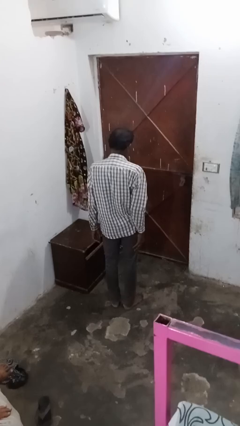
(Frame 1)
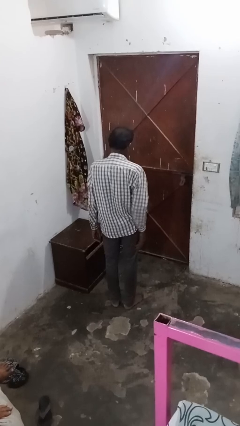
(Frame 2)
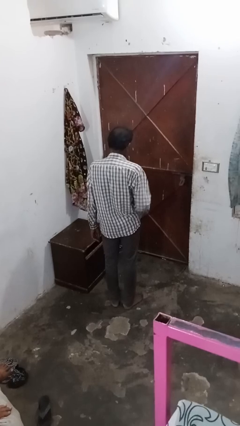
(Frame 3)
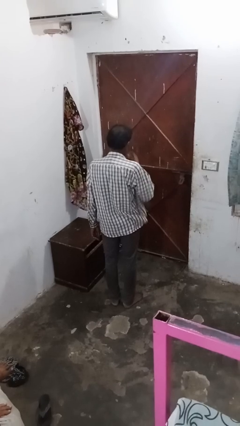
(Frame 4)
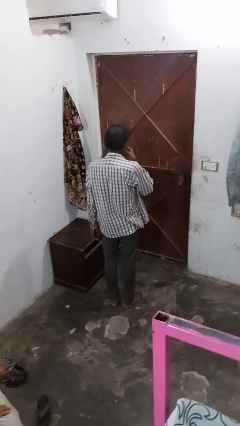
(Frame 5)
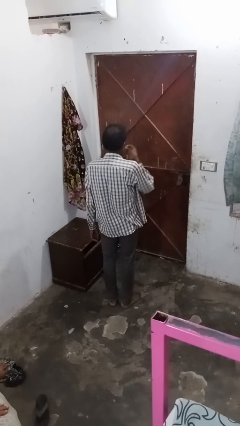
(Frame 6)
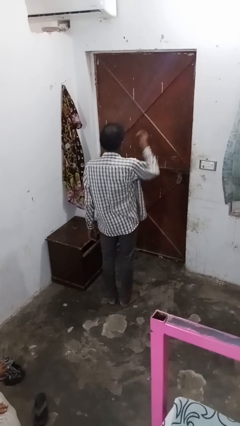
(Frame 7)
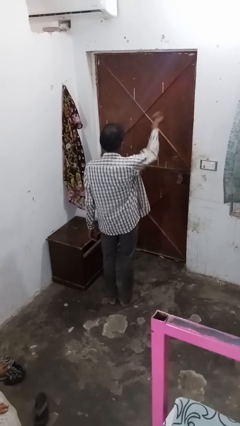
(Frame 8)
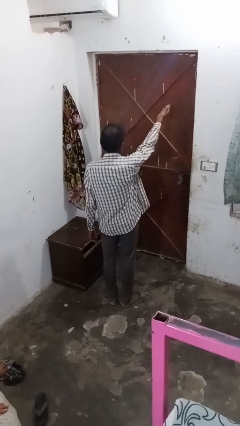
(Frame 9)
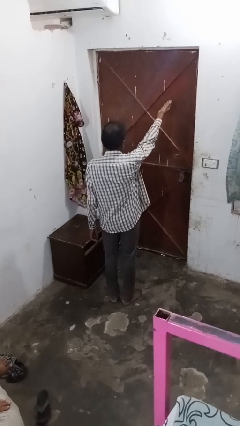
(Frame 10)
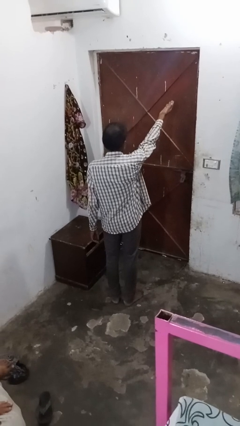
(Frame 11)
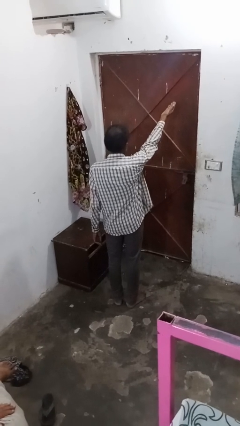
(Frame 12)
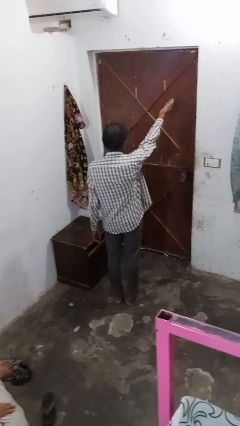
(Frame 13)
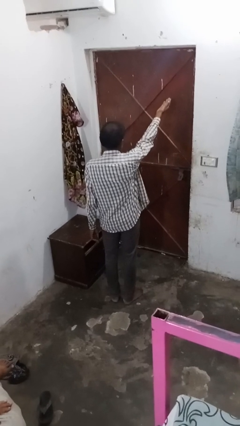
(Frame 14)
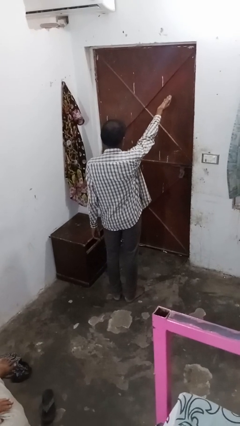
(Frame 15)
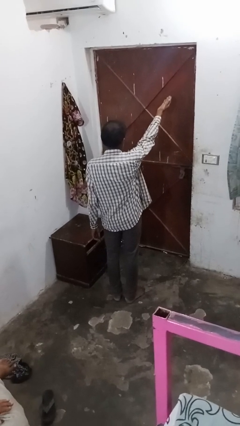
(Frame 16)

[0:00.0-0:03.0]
person gestures blow kiss

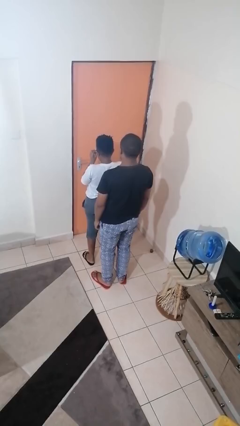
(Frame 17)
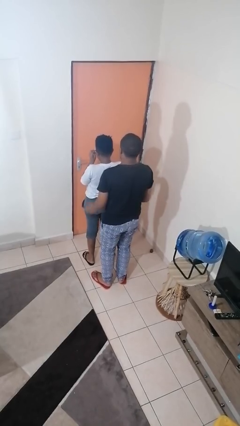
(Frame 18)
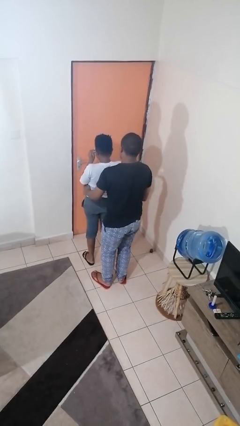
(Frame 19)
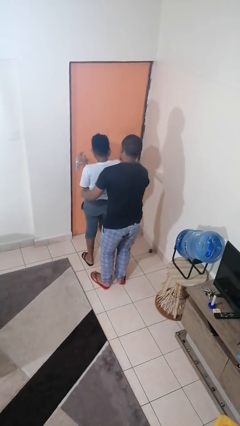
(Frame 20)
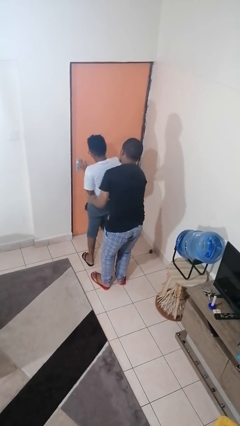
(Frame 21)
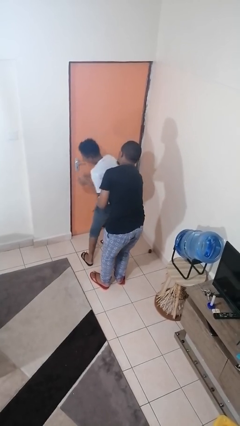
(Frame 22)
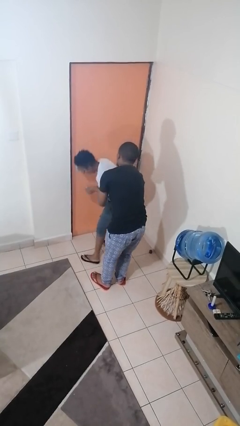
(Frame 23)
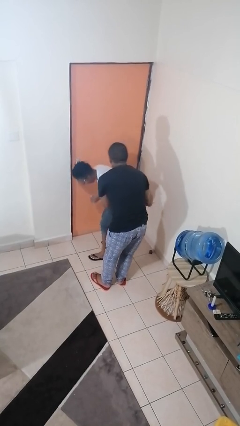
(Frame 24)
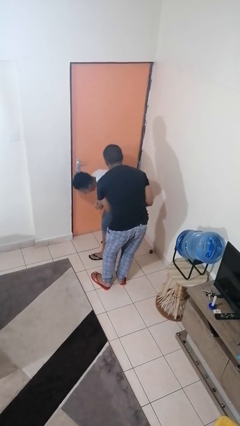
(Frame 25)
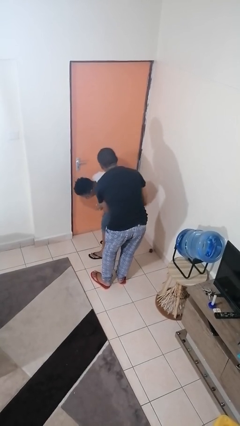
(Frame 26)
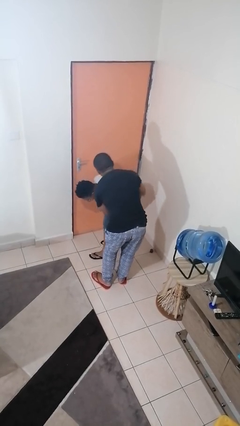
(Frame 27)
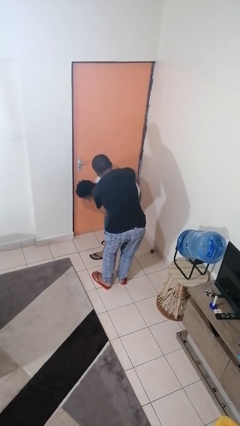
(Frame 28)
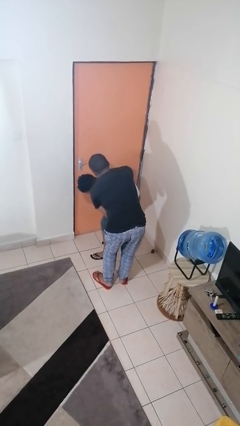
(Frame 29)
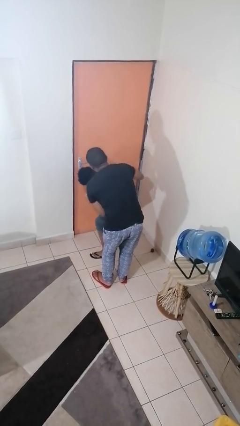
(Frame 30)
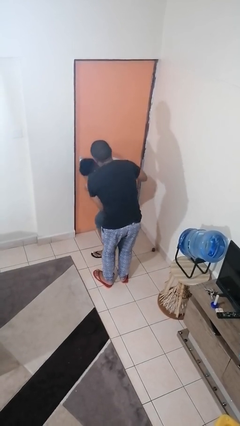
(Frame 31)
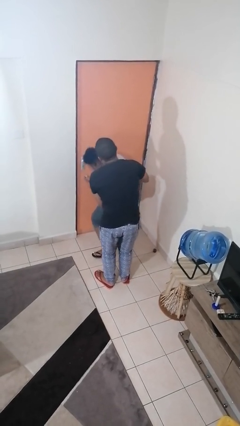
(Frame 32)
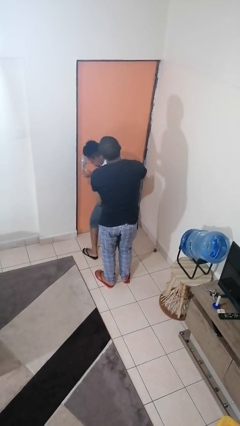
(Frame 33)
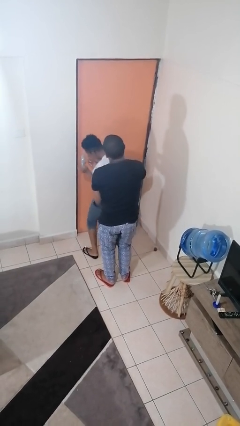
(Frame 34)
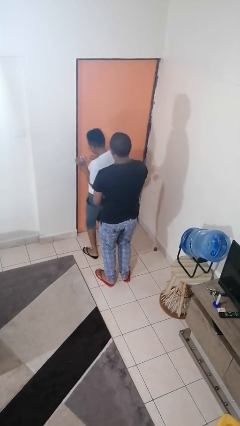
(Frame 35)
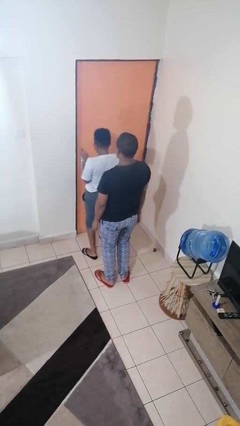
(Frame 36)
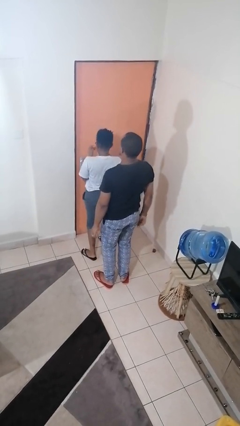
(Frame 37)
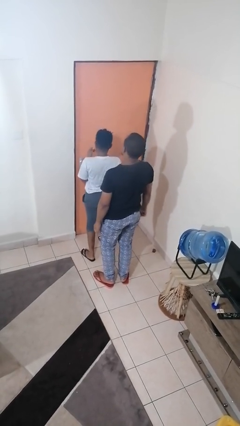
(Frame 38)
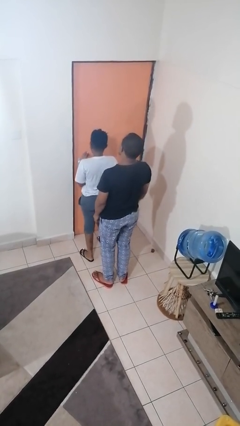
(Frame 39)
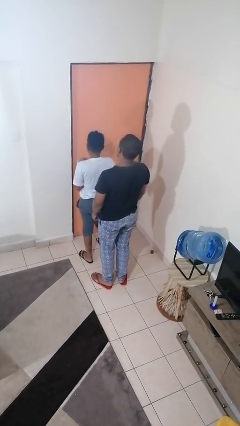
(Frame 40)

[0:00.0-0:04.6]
person tickles person

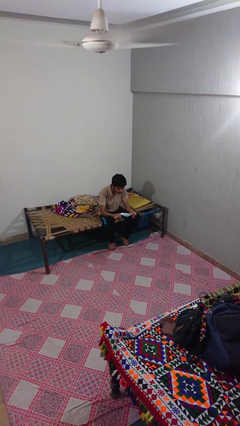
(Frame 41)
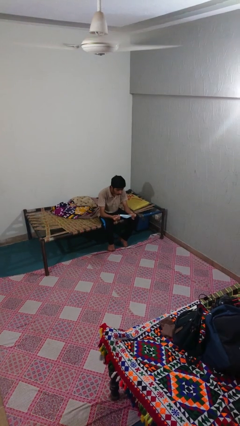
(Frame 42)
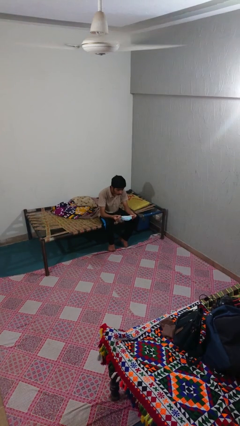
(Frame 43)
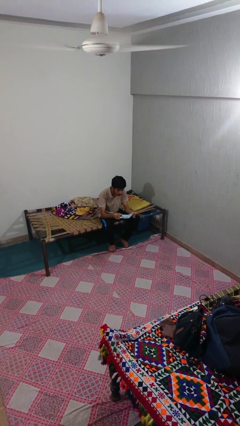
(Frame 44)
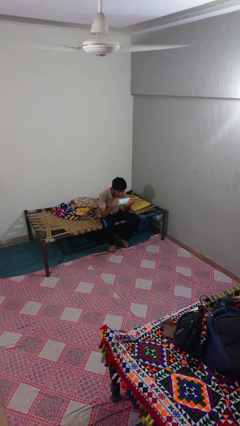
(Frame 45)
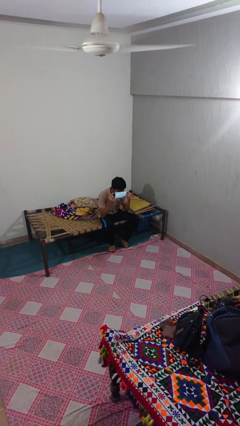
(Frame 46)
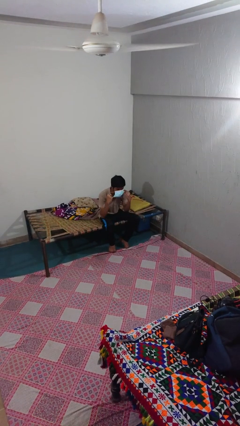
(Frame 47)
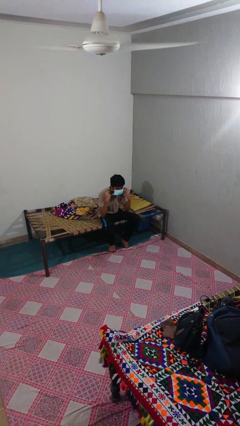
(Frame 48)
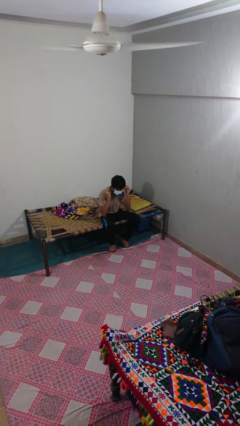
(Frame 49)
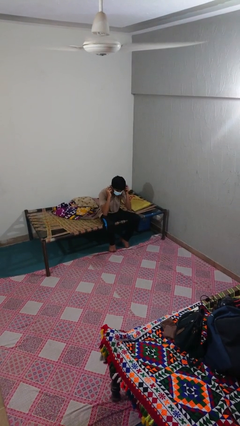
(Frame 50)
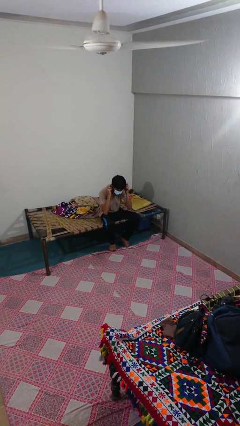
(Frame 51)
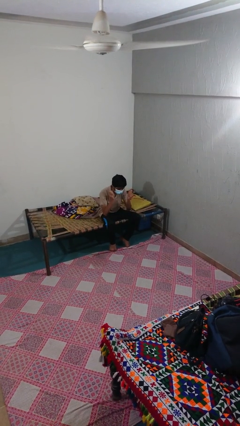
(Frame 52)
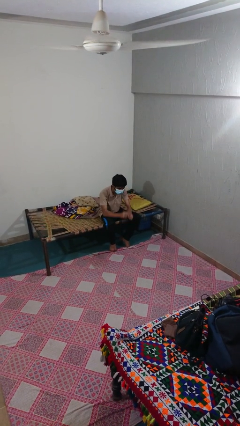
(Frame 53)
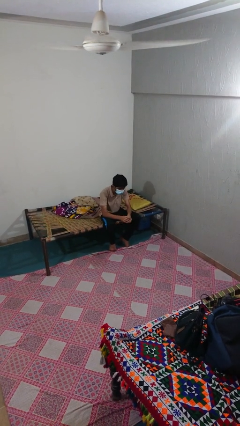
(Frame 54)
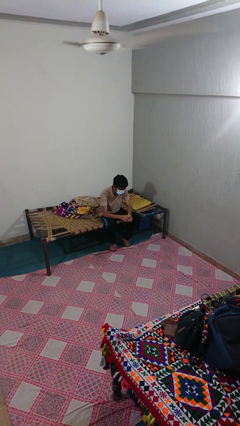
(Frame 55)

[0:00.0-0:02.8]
person puts on facemask

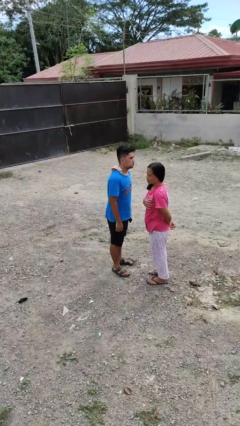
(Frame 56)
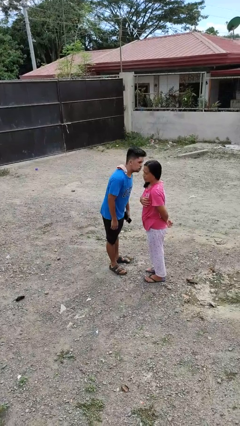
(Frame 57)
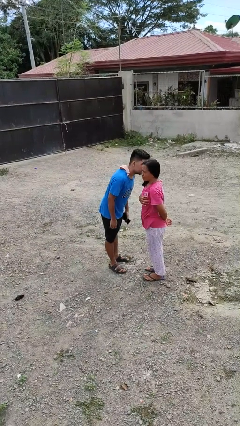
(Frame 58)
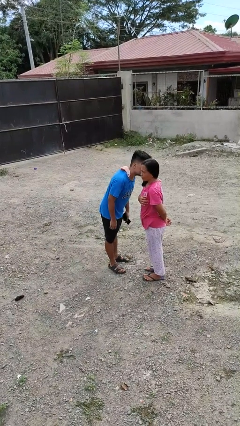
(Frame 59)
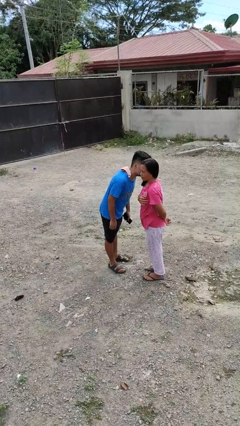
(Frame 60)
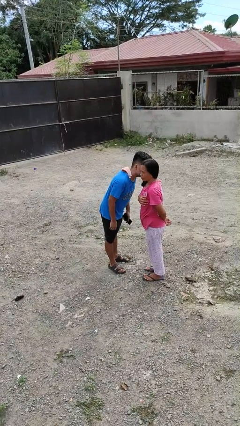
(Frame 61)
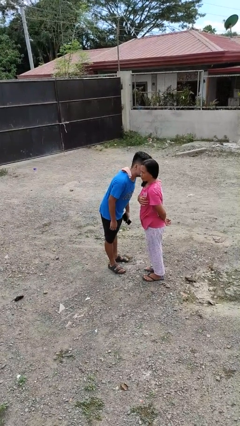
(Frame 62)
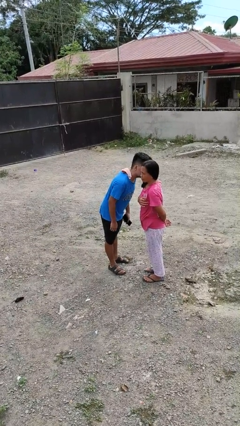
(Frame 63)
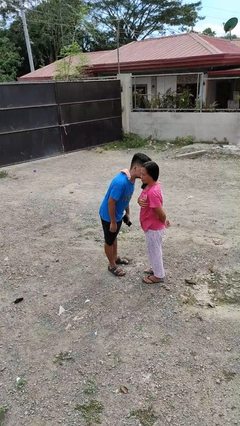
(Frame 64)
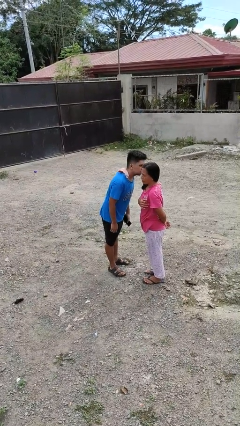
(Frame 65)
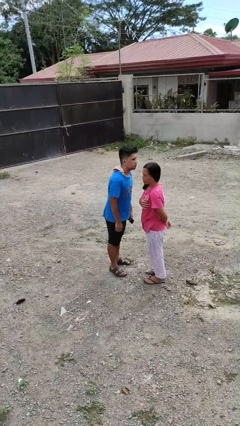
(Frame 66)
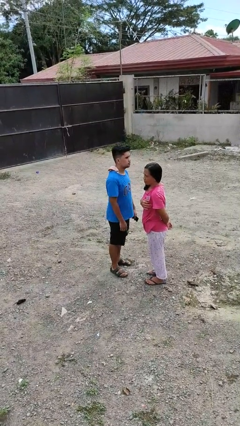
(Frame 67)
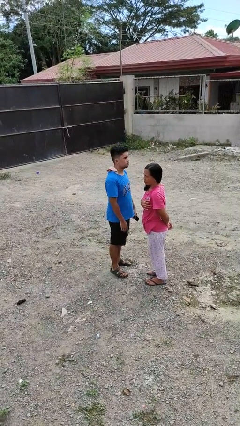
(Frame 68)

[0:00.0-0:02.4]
person kisses cheek of person

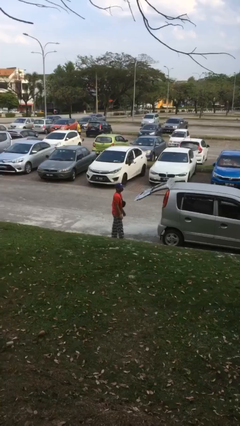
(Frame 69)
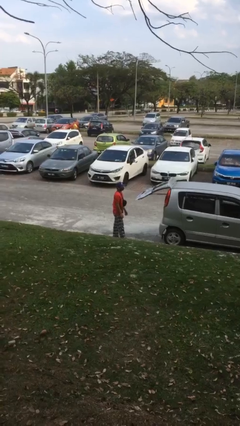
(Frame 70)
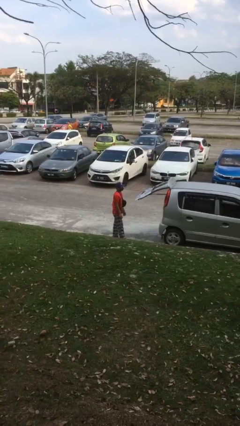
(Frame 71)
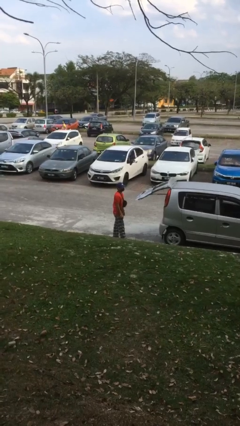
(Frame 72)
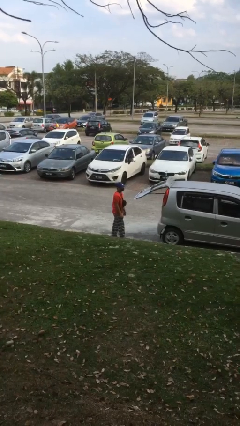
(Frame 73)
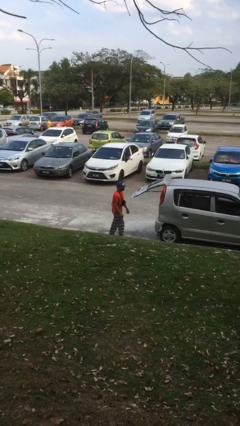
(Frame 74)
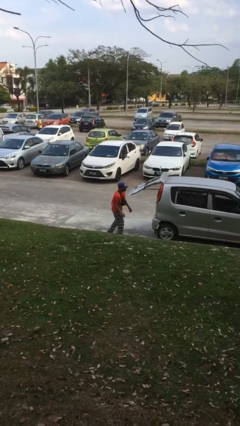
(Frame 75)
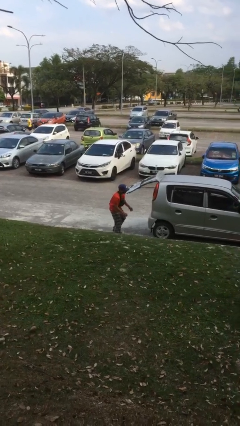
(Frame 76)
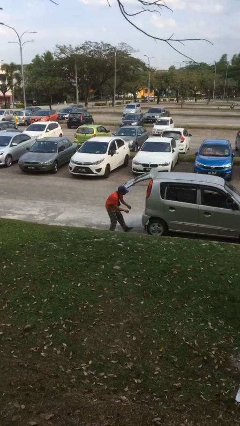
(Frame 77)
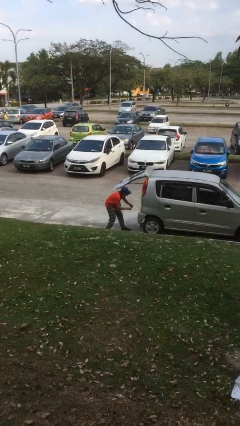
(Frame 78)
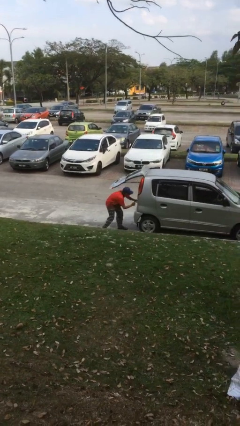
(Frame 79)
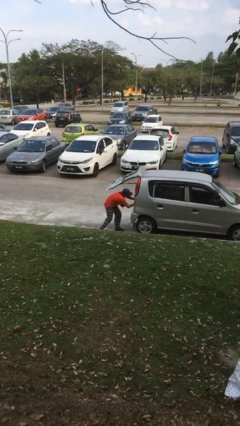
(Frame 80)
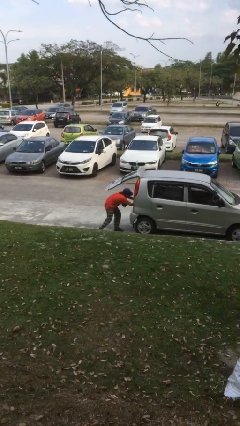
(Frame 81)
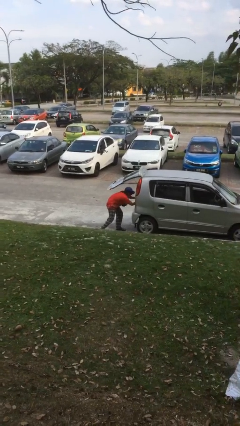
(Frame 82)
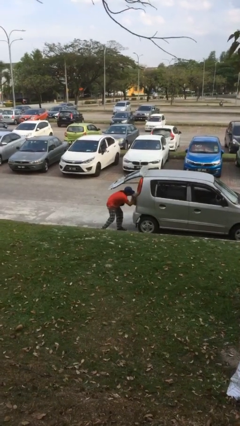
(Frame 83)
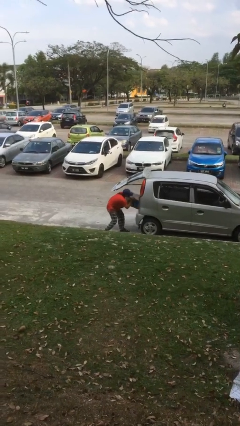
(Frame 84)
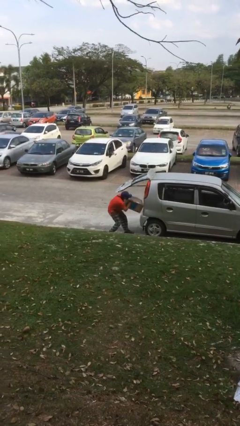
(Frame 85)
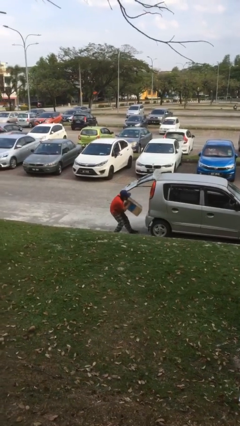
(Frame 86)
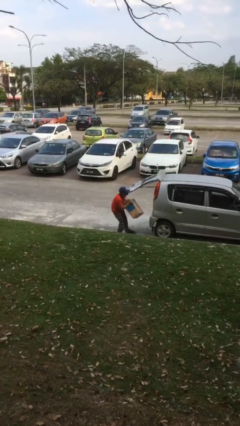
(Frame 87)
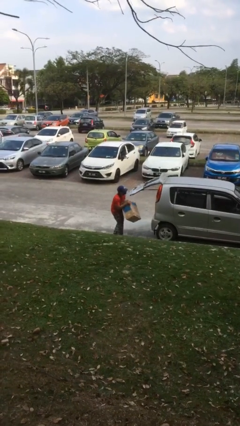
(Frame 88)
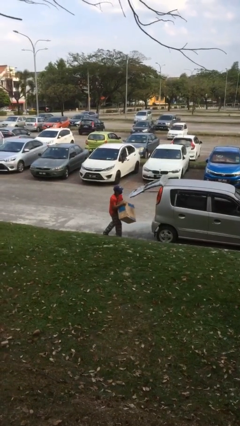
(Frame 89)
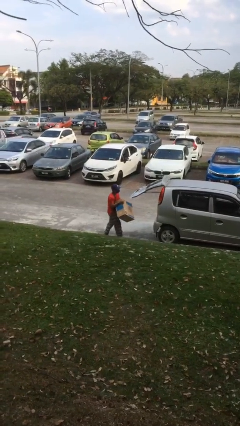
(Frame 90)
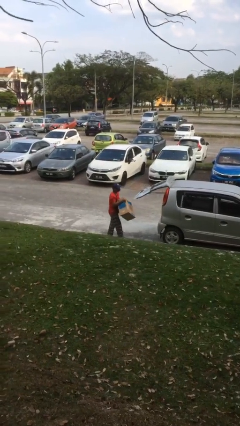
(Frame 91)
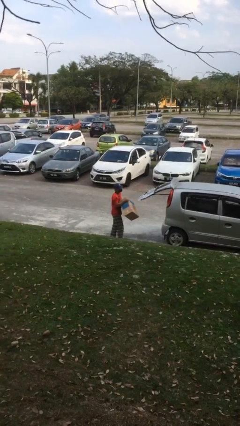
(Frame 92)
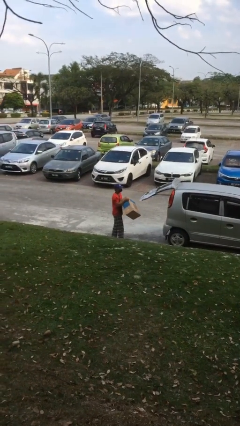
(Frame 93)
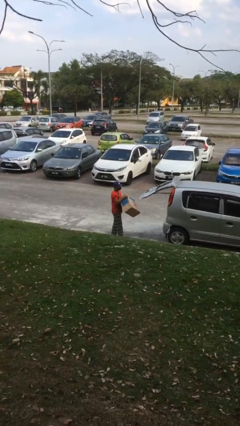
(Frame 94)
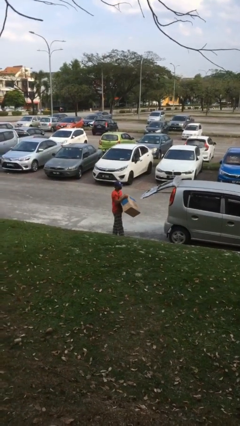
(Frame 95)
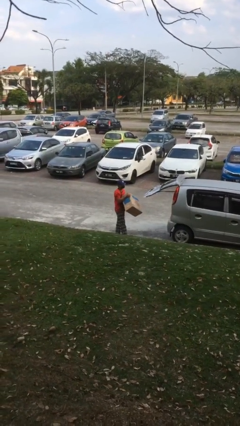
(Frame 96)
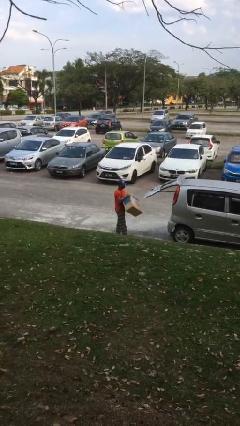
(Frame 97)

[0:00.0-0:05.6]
person unloads car
